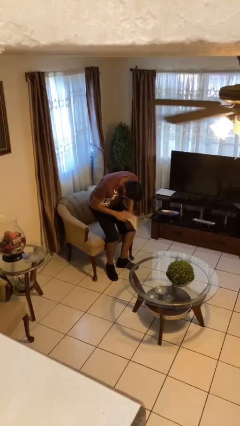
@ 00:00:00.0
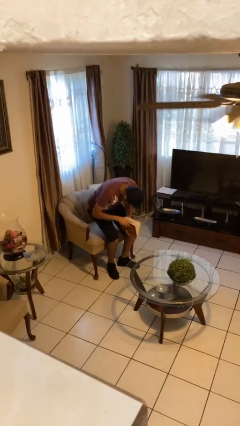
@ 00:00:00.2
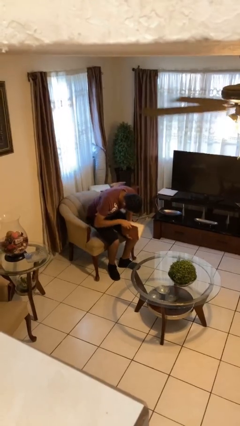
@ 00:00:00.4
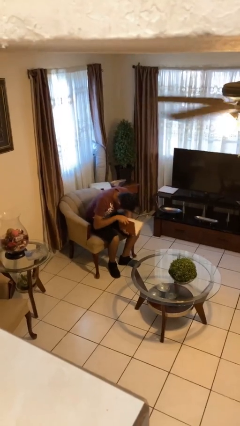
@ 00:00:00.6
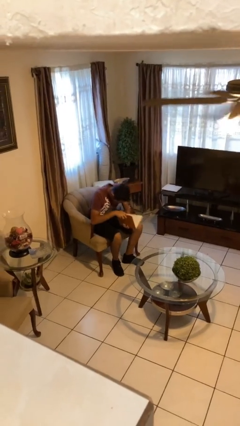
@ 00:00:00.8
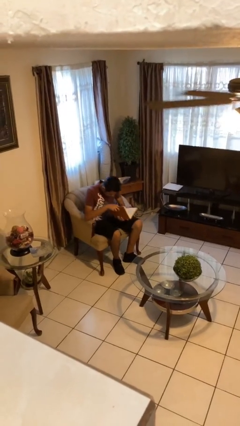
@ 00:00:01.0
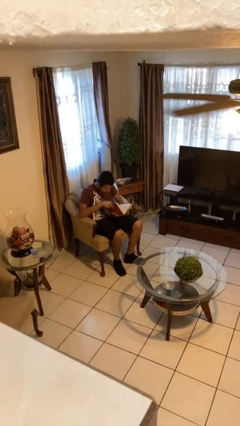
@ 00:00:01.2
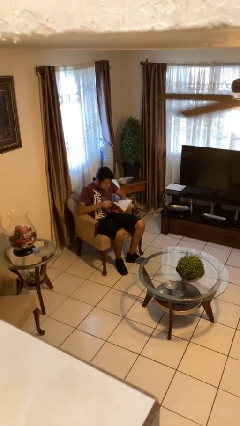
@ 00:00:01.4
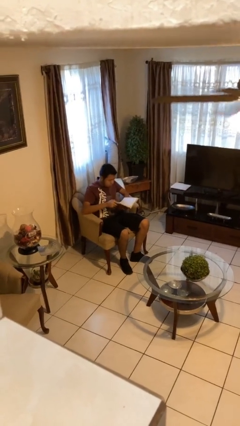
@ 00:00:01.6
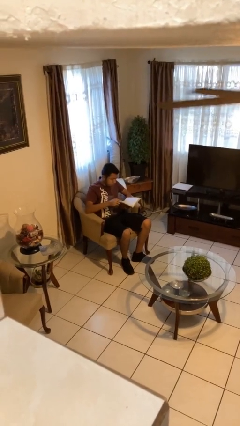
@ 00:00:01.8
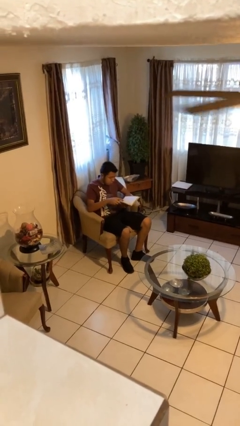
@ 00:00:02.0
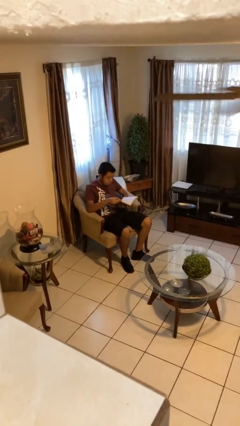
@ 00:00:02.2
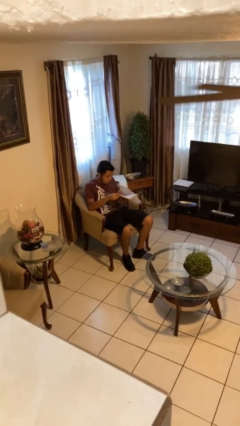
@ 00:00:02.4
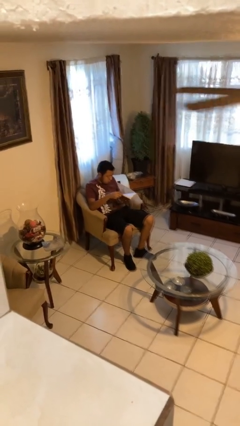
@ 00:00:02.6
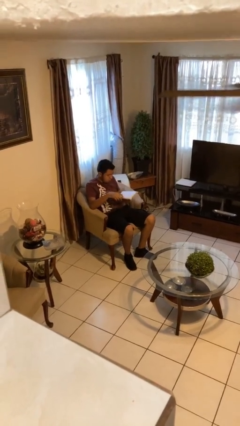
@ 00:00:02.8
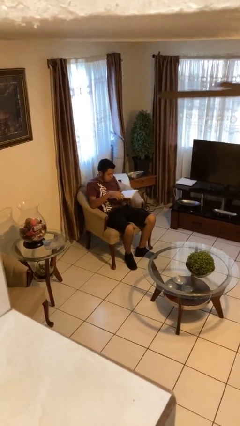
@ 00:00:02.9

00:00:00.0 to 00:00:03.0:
person sits down

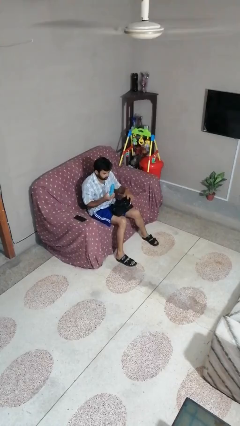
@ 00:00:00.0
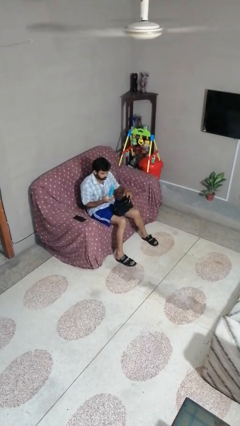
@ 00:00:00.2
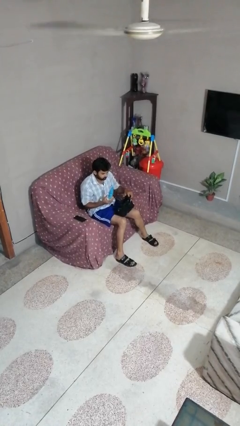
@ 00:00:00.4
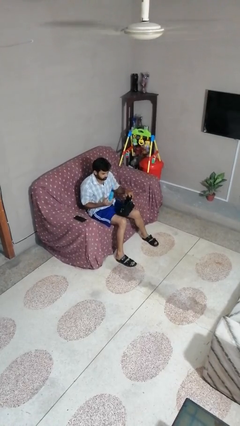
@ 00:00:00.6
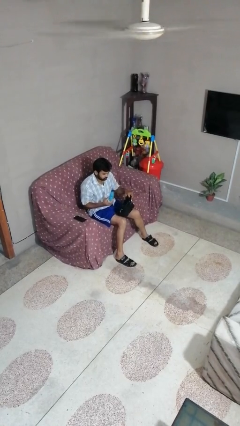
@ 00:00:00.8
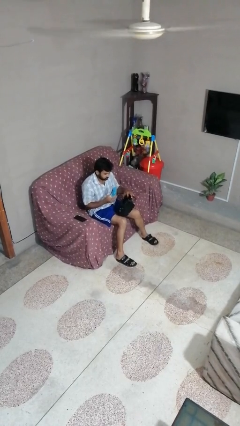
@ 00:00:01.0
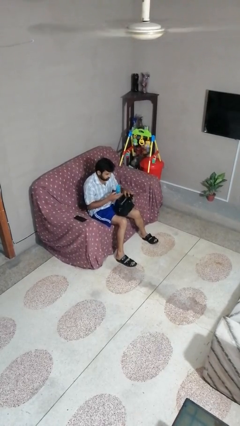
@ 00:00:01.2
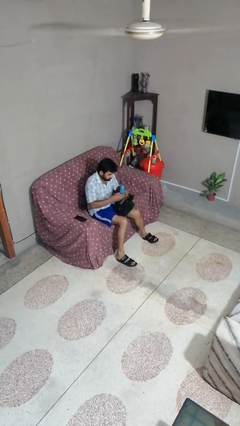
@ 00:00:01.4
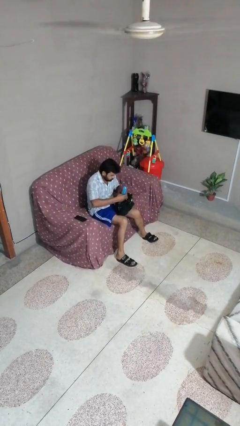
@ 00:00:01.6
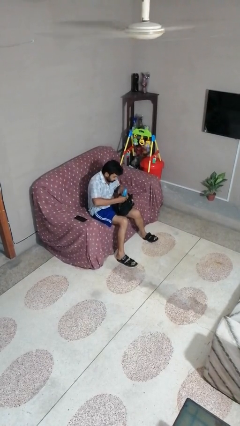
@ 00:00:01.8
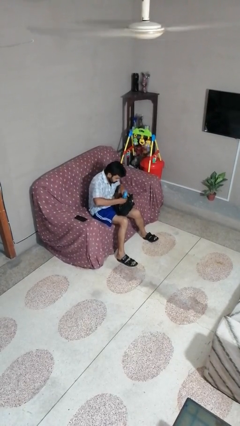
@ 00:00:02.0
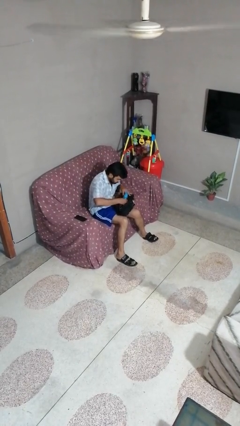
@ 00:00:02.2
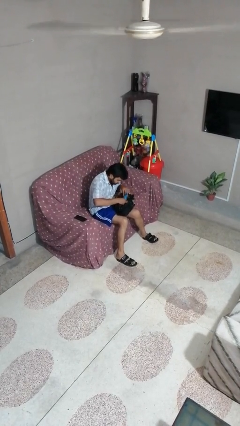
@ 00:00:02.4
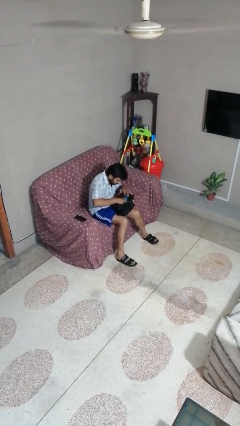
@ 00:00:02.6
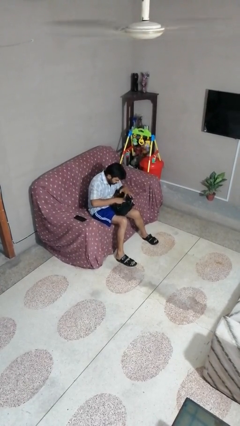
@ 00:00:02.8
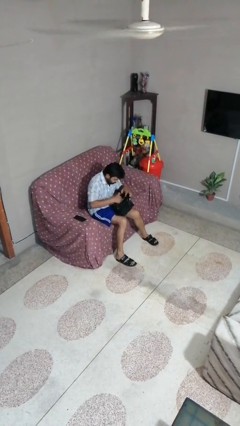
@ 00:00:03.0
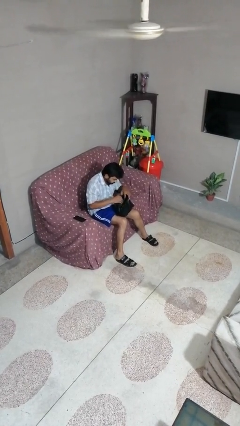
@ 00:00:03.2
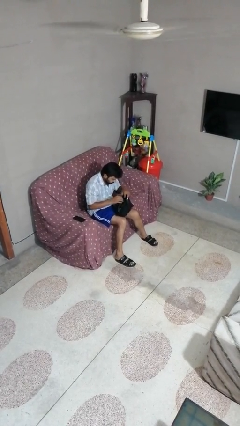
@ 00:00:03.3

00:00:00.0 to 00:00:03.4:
person puts object into purse

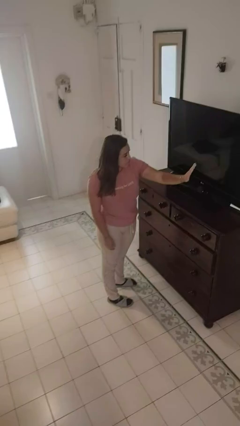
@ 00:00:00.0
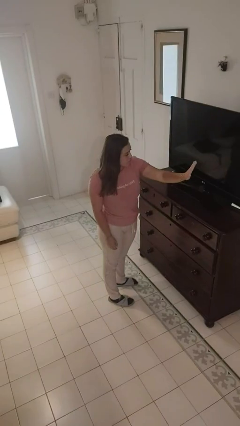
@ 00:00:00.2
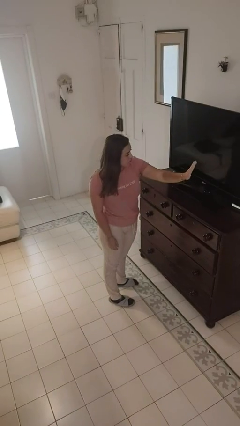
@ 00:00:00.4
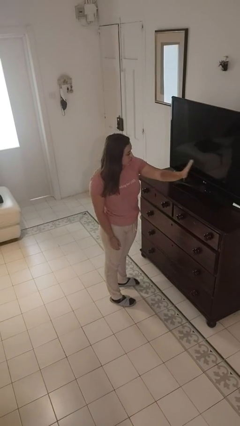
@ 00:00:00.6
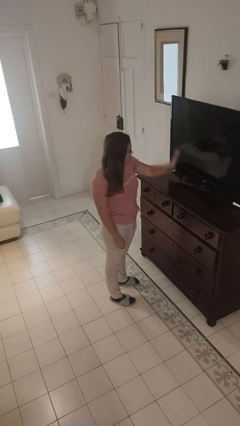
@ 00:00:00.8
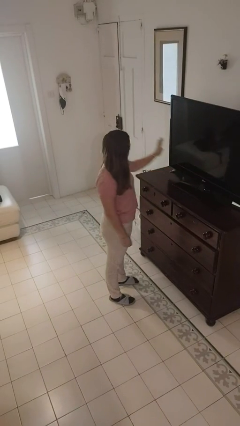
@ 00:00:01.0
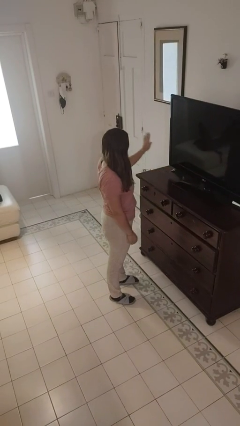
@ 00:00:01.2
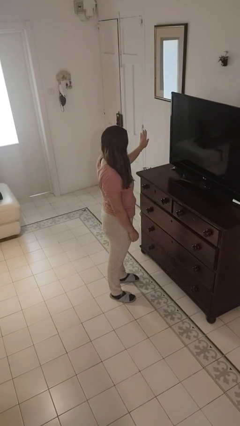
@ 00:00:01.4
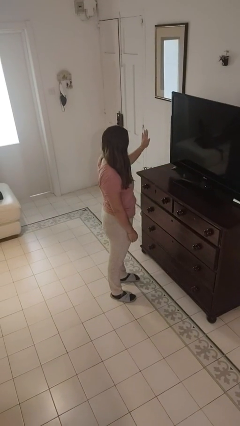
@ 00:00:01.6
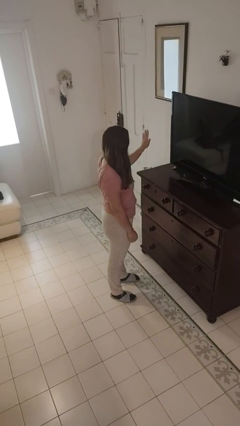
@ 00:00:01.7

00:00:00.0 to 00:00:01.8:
person gestures swipe right

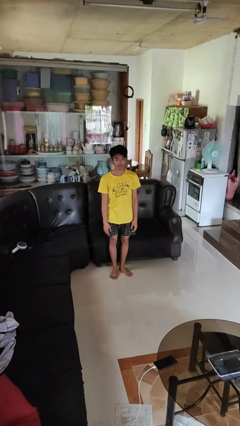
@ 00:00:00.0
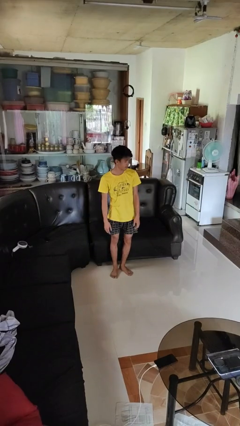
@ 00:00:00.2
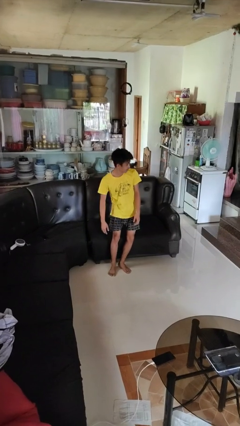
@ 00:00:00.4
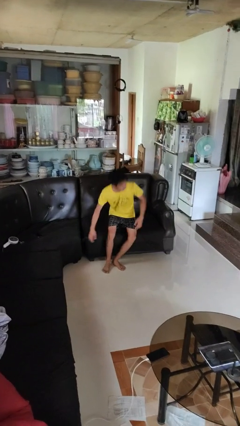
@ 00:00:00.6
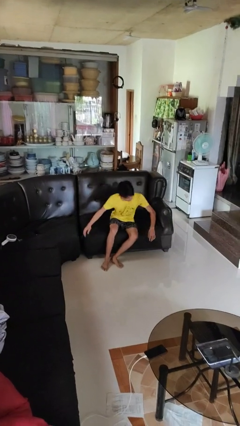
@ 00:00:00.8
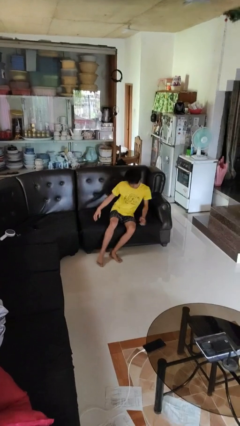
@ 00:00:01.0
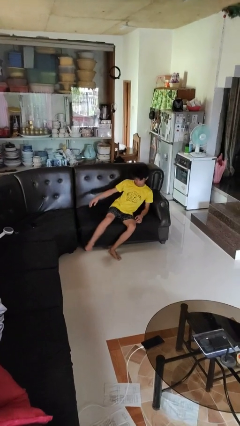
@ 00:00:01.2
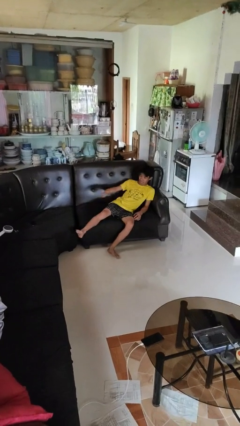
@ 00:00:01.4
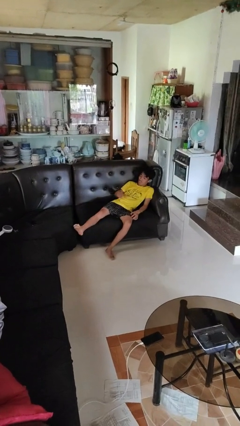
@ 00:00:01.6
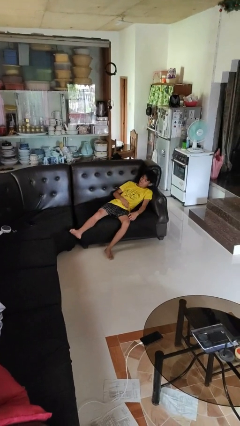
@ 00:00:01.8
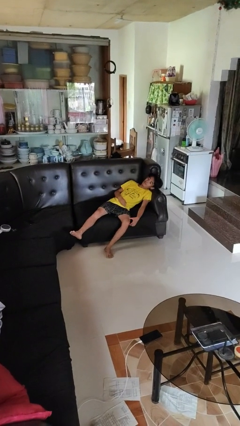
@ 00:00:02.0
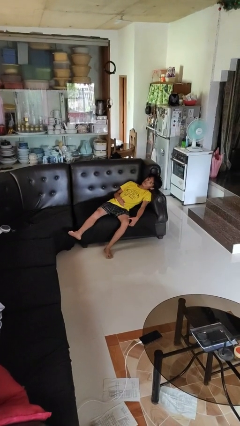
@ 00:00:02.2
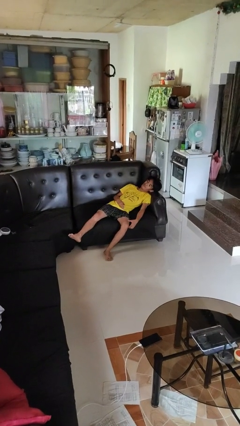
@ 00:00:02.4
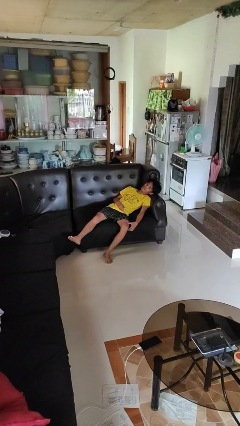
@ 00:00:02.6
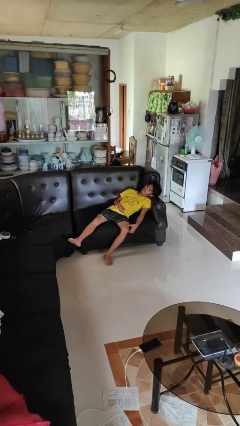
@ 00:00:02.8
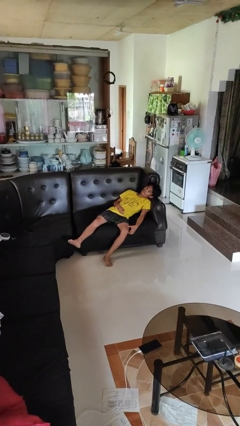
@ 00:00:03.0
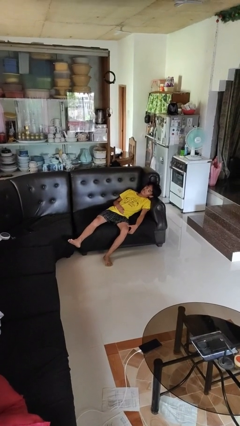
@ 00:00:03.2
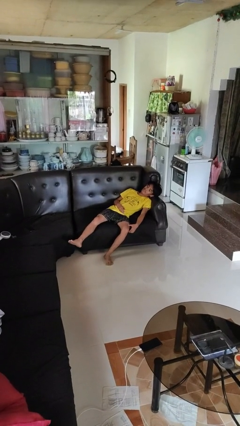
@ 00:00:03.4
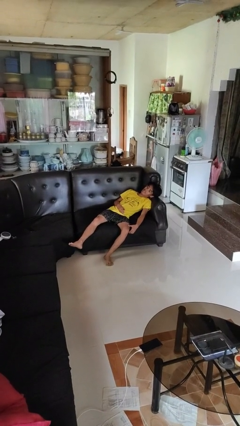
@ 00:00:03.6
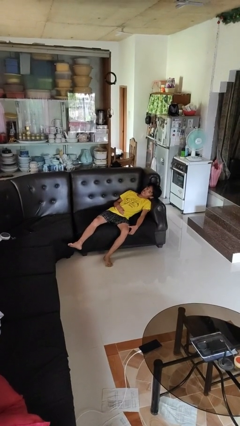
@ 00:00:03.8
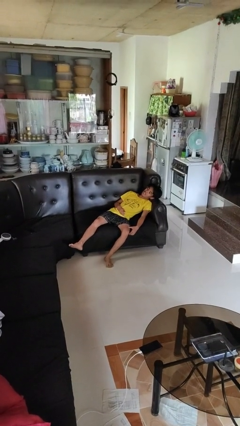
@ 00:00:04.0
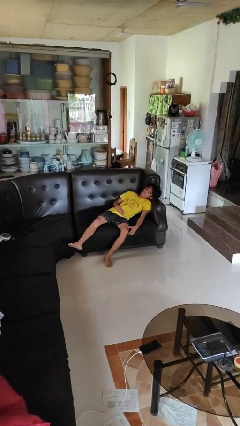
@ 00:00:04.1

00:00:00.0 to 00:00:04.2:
person lies down on couch

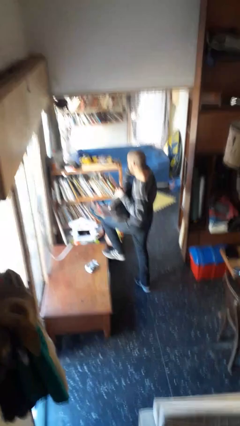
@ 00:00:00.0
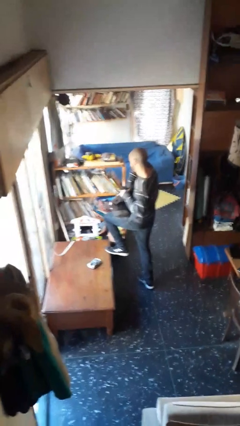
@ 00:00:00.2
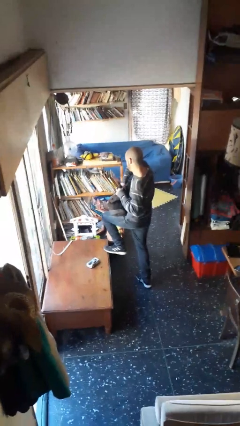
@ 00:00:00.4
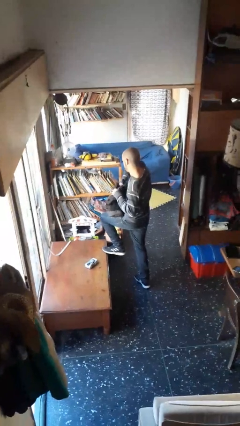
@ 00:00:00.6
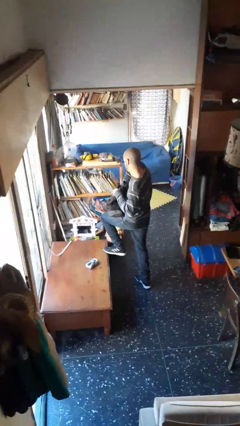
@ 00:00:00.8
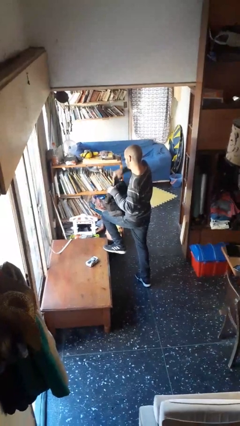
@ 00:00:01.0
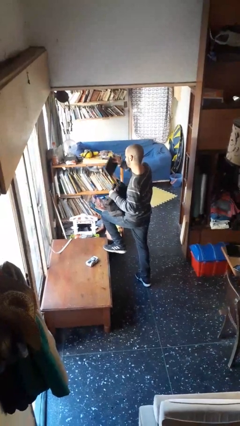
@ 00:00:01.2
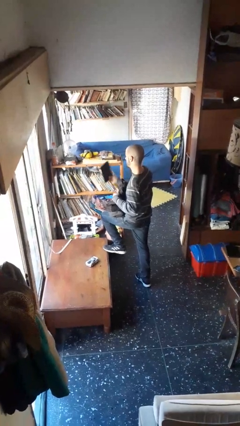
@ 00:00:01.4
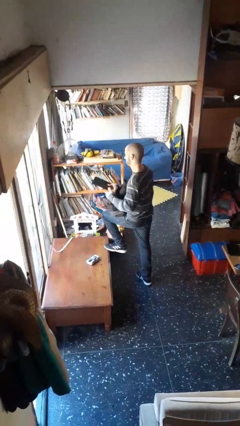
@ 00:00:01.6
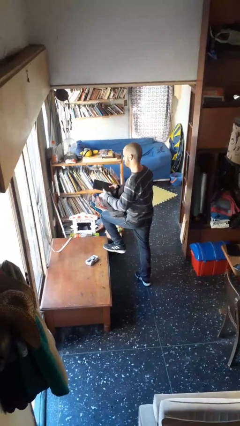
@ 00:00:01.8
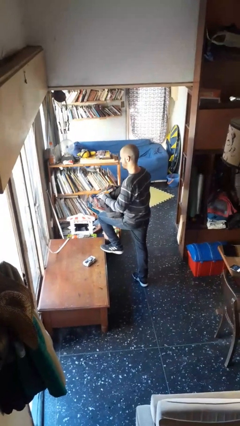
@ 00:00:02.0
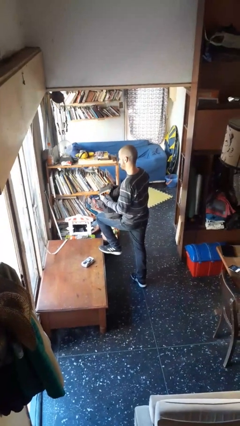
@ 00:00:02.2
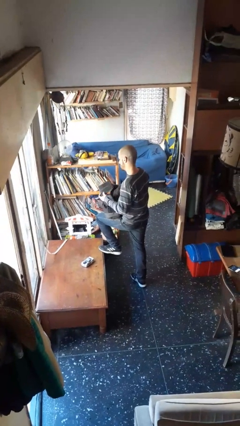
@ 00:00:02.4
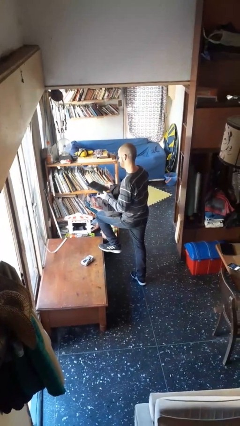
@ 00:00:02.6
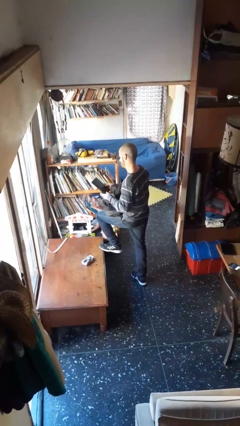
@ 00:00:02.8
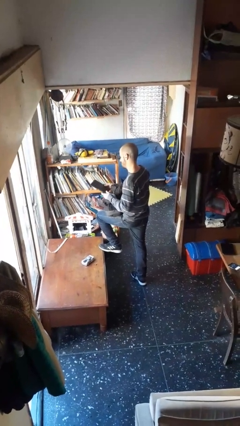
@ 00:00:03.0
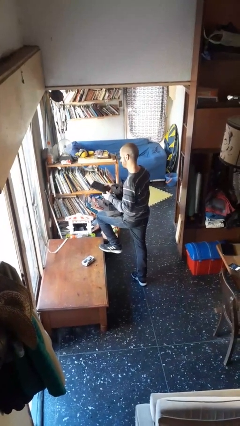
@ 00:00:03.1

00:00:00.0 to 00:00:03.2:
person takes object from backpack

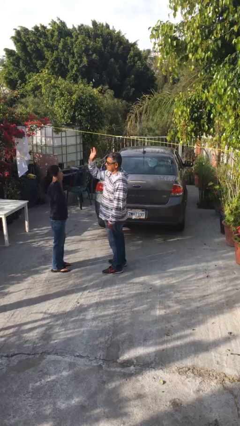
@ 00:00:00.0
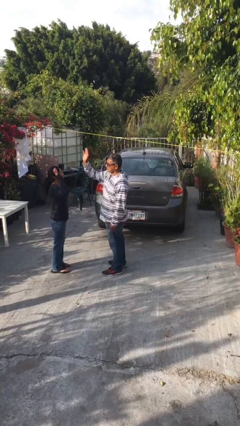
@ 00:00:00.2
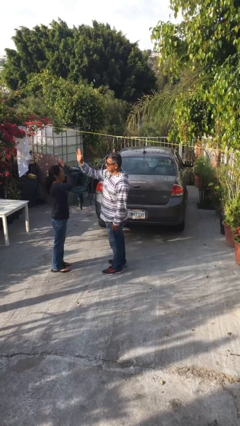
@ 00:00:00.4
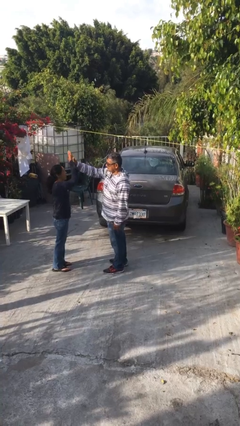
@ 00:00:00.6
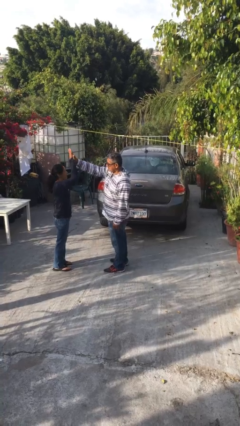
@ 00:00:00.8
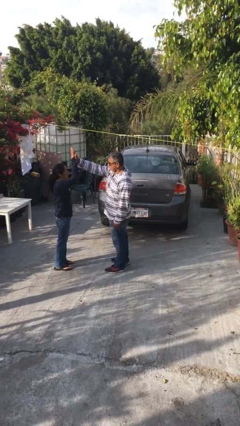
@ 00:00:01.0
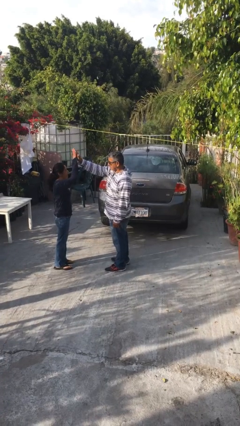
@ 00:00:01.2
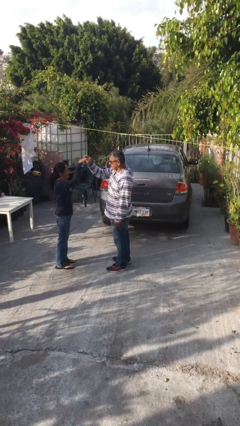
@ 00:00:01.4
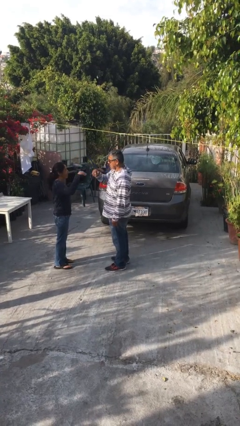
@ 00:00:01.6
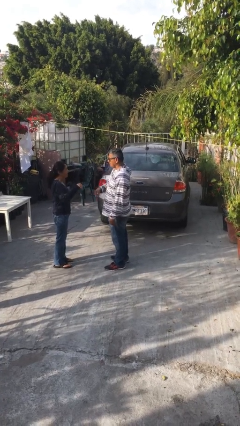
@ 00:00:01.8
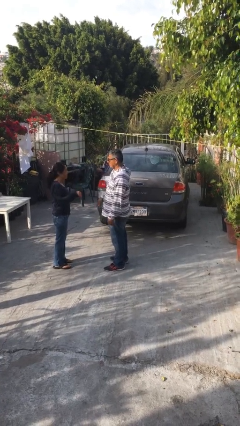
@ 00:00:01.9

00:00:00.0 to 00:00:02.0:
person highfives hand
